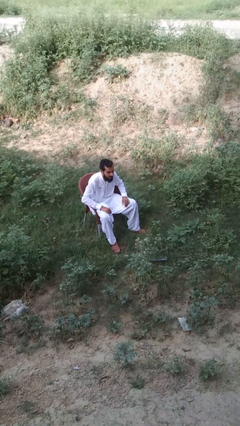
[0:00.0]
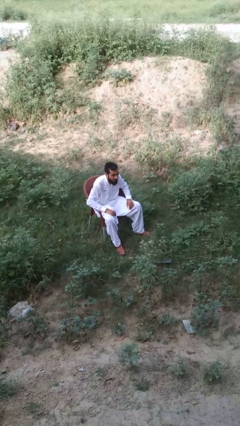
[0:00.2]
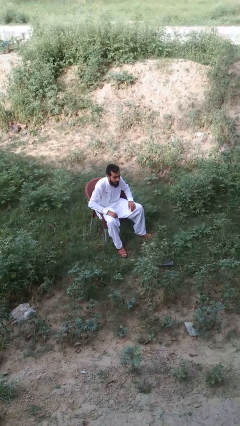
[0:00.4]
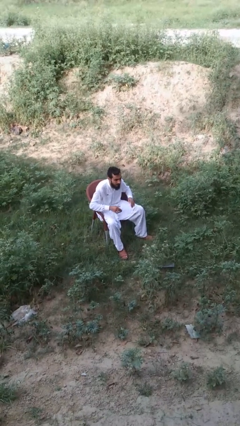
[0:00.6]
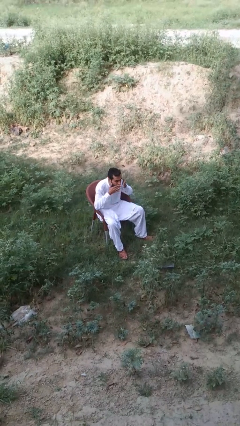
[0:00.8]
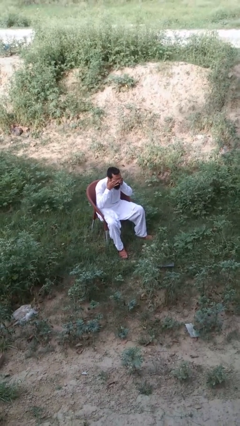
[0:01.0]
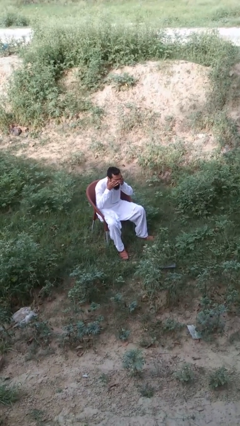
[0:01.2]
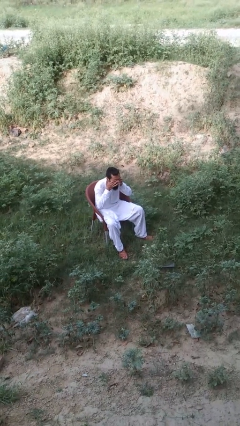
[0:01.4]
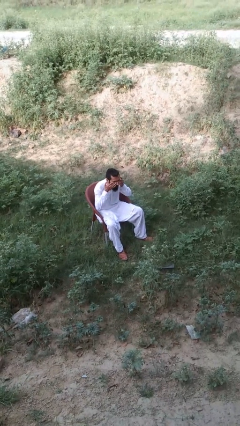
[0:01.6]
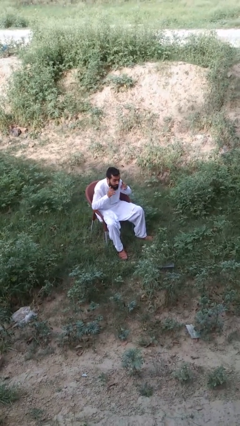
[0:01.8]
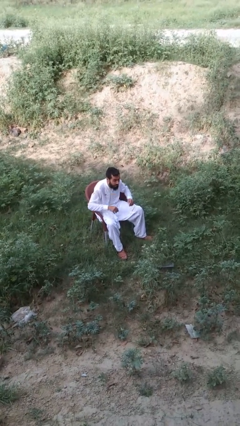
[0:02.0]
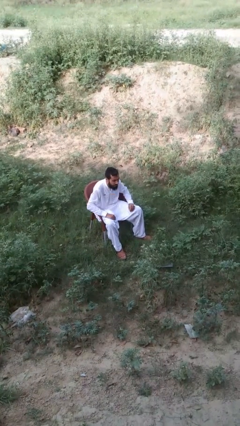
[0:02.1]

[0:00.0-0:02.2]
person rubs eyes

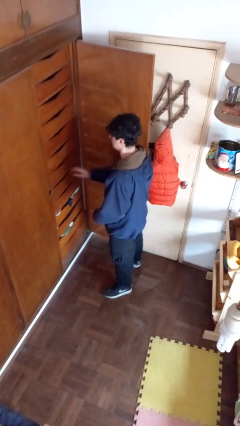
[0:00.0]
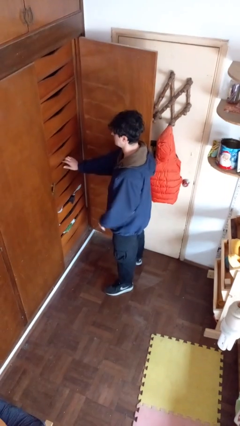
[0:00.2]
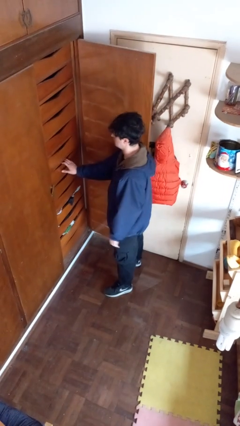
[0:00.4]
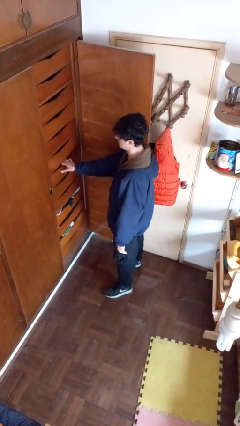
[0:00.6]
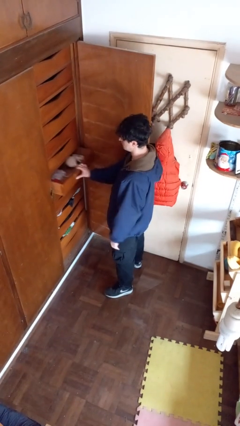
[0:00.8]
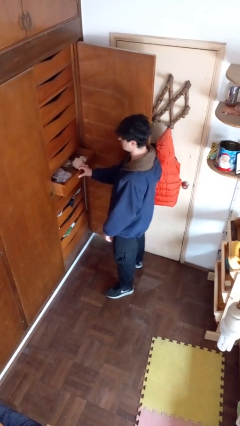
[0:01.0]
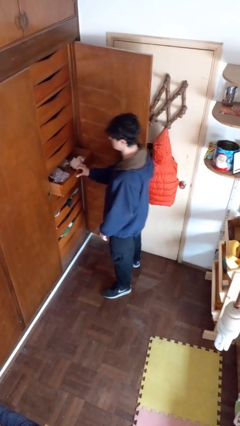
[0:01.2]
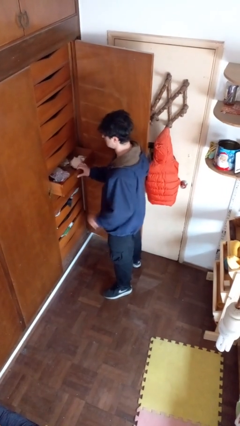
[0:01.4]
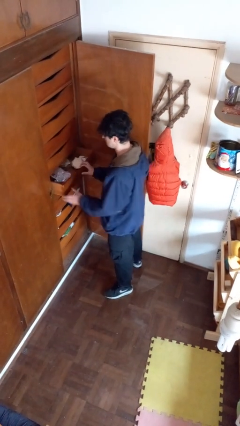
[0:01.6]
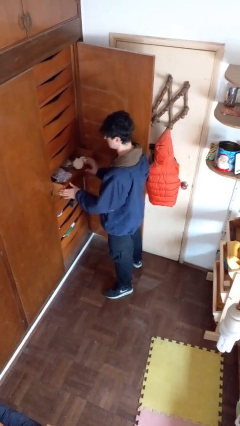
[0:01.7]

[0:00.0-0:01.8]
person opens dresser drawer

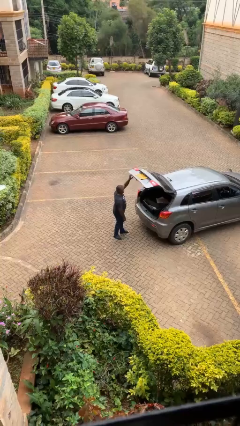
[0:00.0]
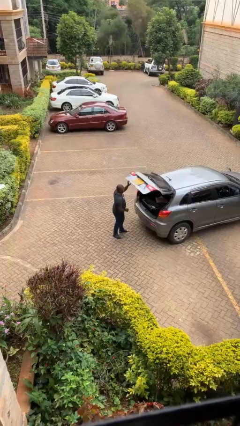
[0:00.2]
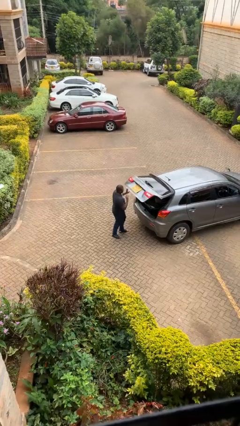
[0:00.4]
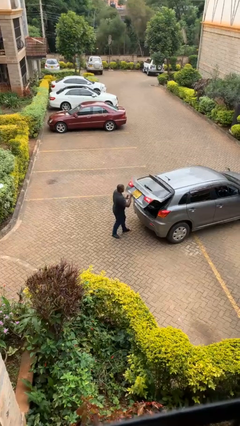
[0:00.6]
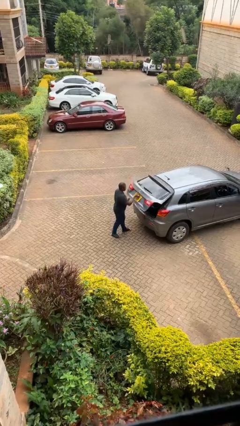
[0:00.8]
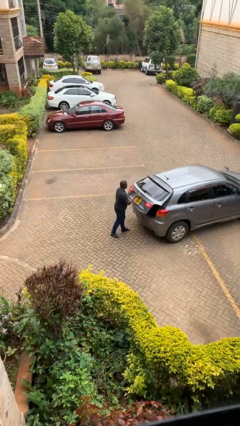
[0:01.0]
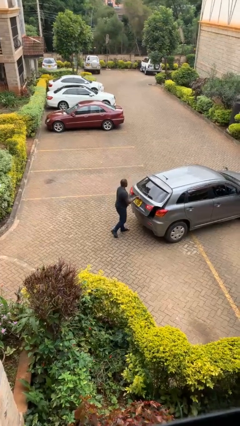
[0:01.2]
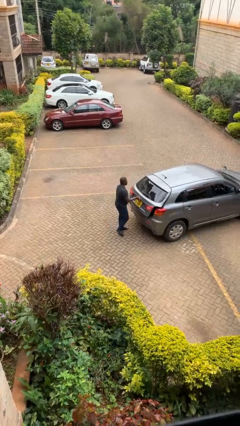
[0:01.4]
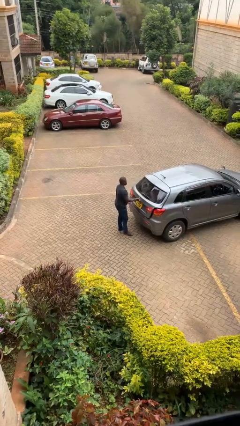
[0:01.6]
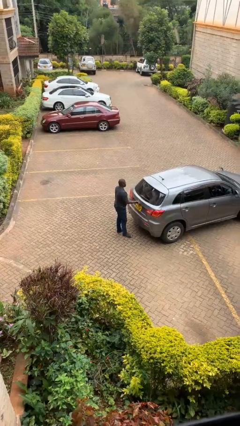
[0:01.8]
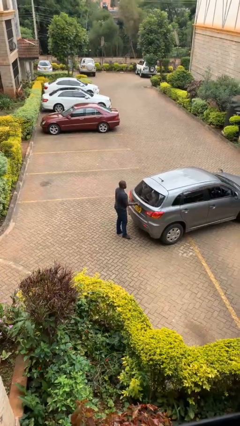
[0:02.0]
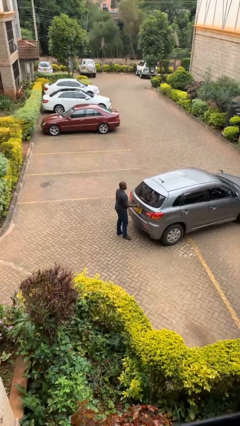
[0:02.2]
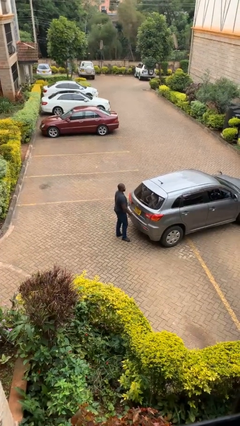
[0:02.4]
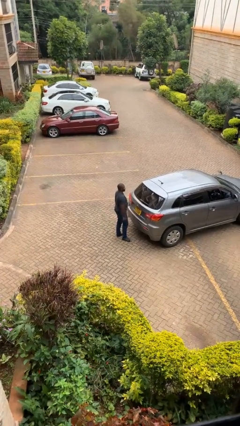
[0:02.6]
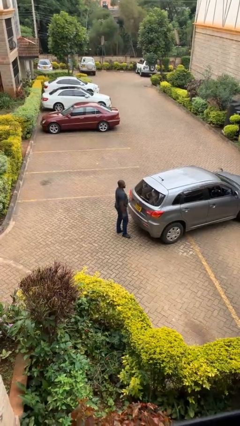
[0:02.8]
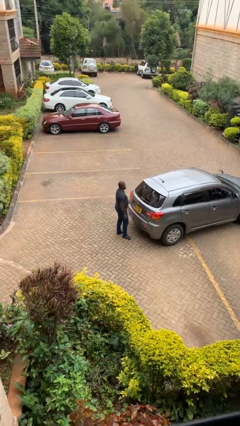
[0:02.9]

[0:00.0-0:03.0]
person closes car trunk

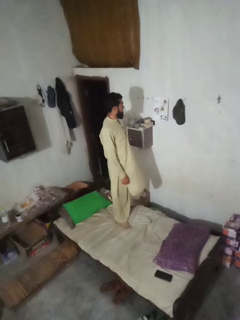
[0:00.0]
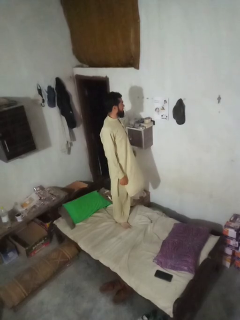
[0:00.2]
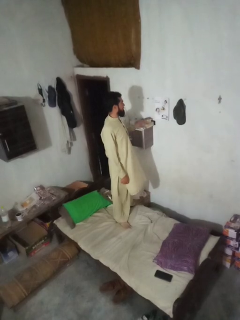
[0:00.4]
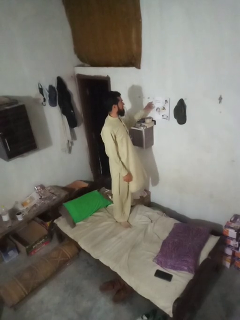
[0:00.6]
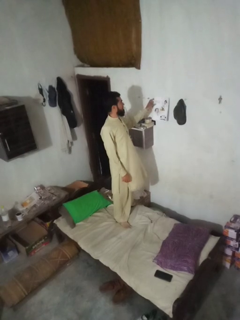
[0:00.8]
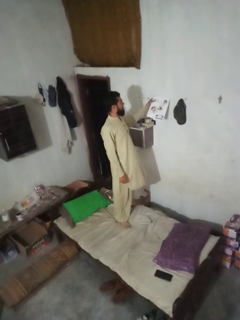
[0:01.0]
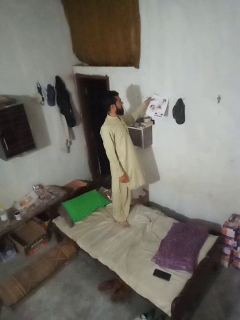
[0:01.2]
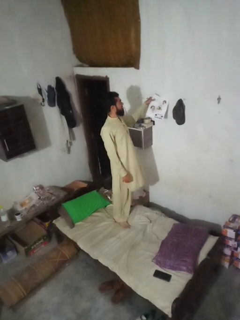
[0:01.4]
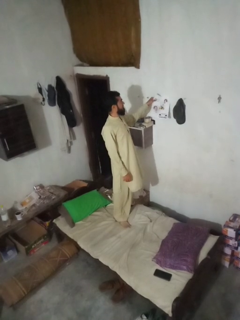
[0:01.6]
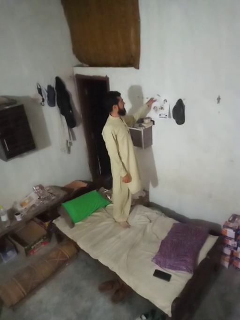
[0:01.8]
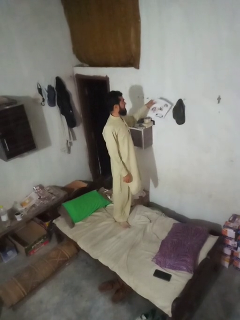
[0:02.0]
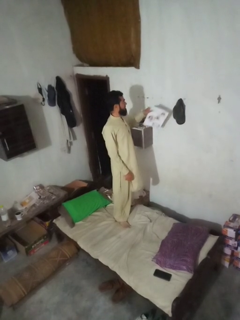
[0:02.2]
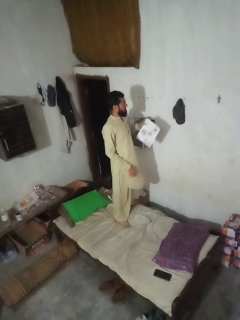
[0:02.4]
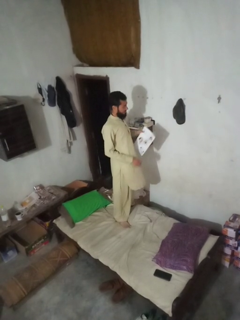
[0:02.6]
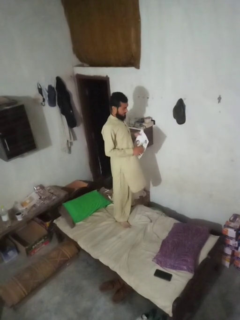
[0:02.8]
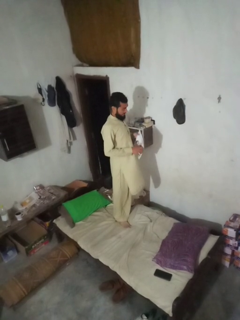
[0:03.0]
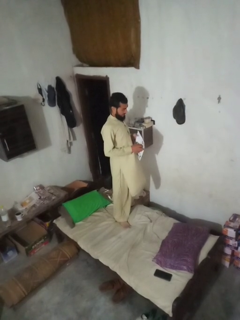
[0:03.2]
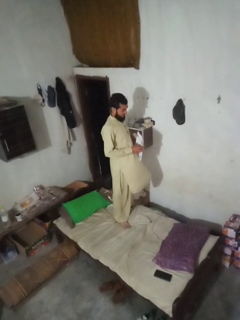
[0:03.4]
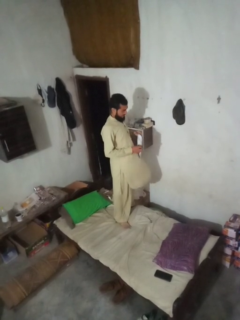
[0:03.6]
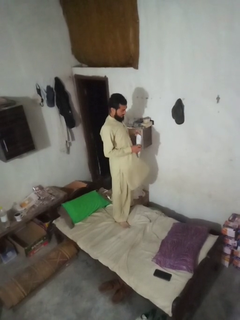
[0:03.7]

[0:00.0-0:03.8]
person takes down picture frame

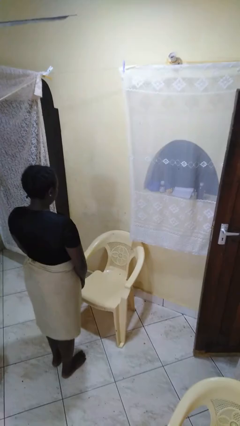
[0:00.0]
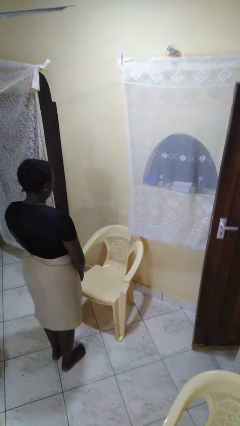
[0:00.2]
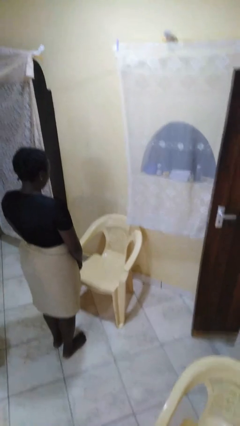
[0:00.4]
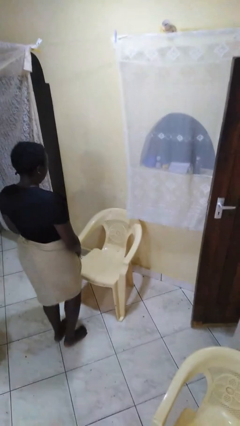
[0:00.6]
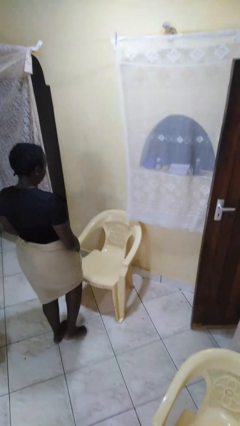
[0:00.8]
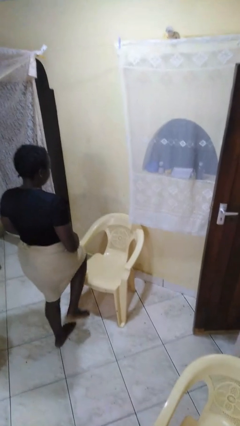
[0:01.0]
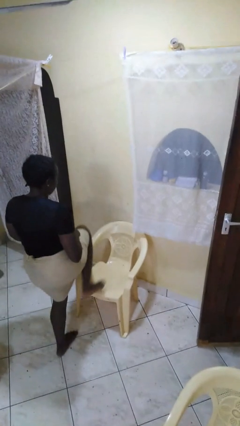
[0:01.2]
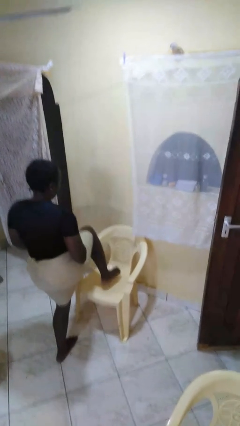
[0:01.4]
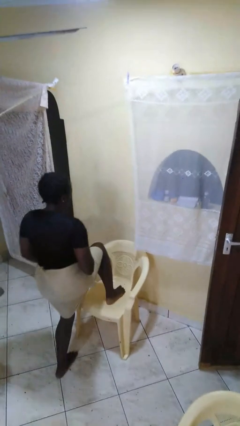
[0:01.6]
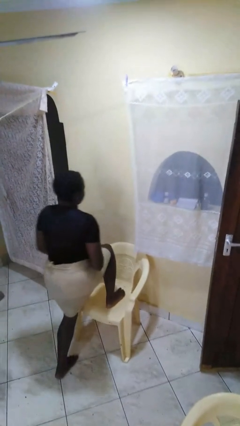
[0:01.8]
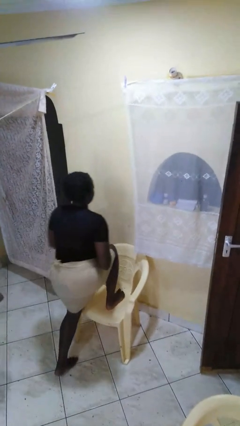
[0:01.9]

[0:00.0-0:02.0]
person climbs on chair

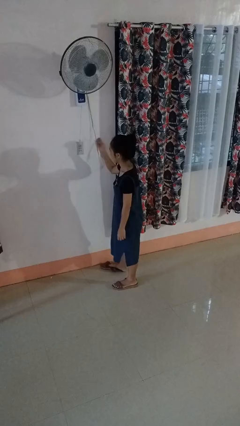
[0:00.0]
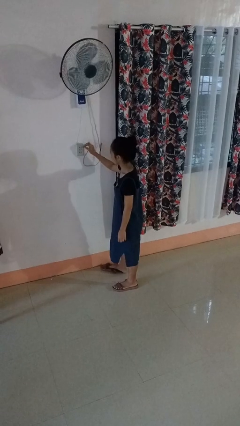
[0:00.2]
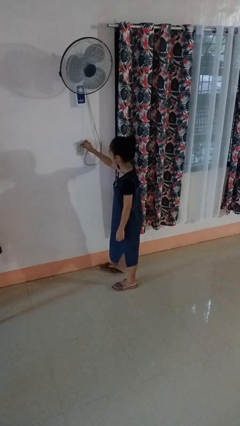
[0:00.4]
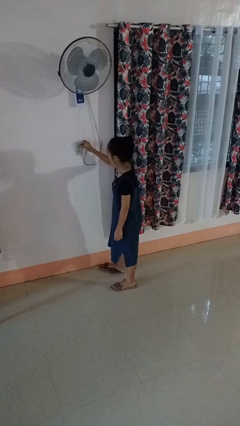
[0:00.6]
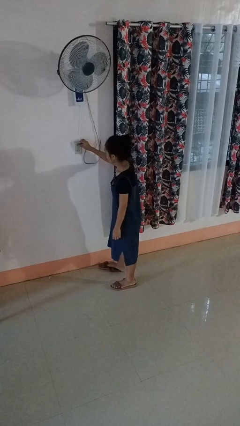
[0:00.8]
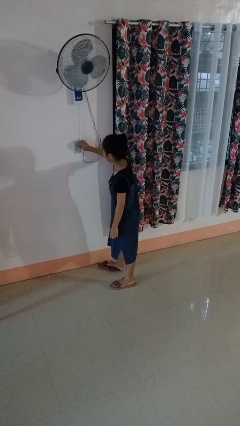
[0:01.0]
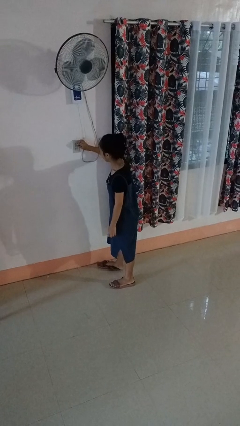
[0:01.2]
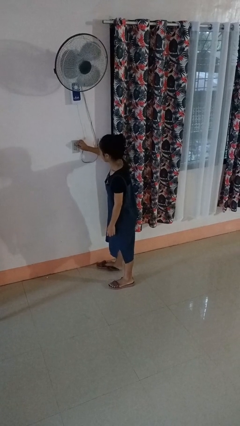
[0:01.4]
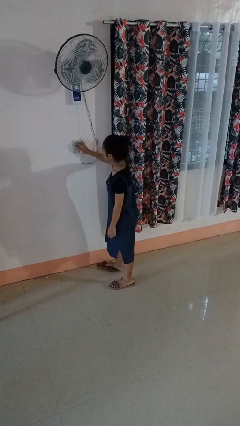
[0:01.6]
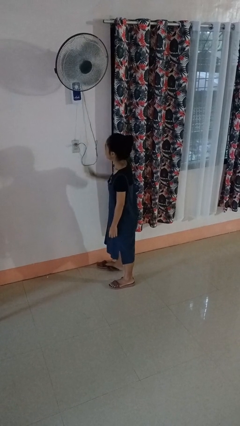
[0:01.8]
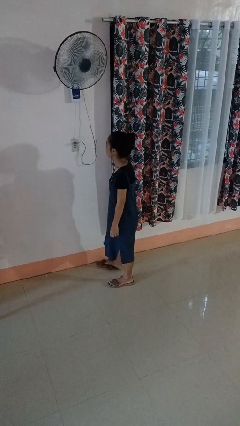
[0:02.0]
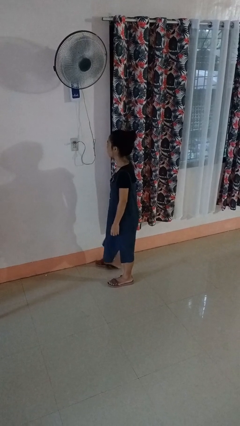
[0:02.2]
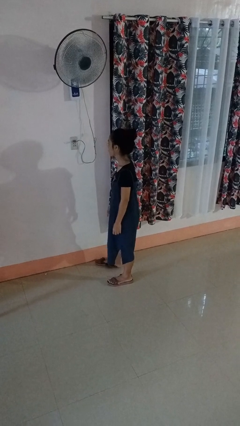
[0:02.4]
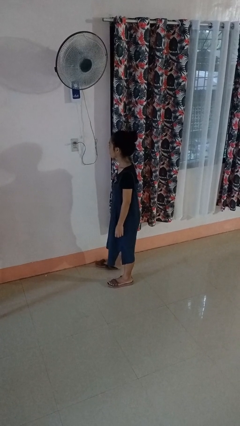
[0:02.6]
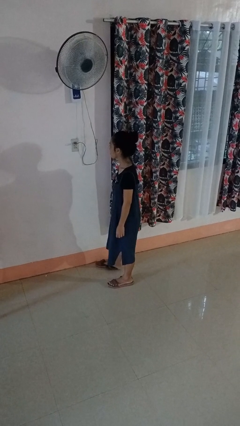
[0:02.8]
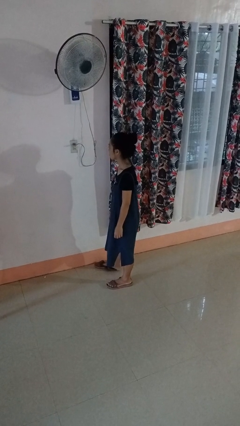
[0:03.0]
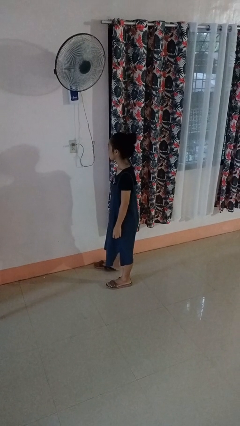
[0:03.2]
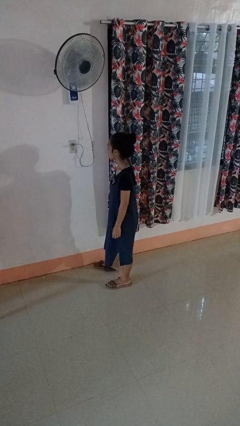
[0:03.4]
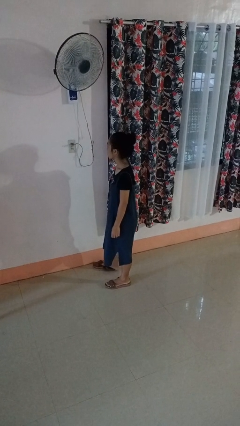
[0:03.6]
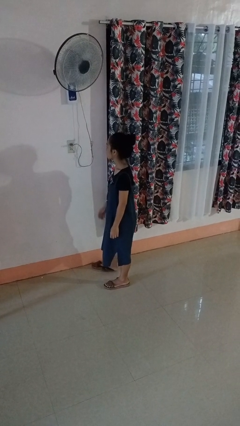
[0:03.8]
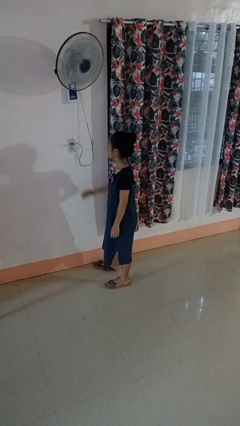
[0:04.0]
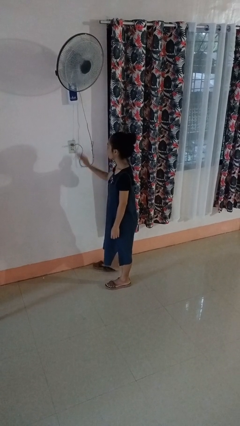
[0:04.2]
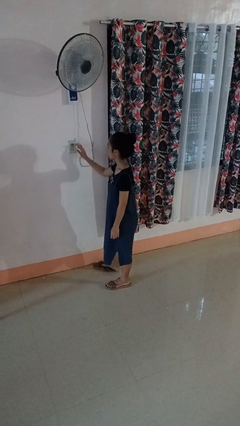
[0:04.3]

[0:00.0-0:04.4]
person plugs into electrical socket

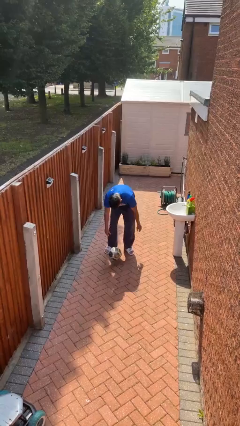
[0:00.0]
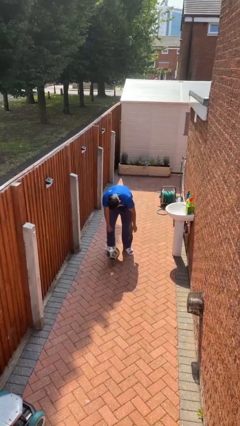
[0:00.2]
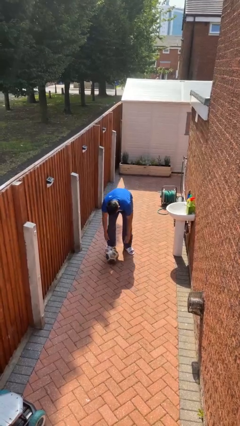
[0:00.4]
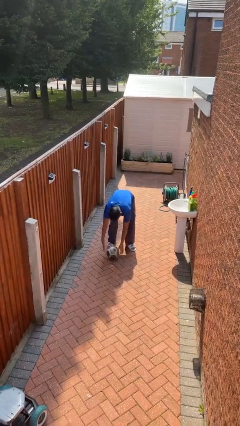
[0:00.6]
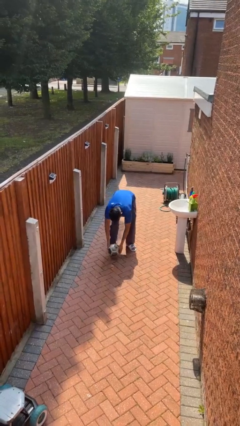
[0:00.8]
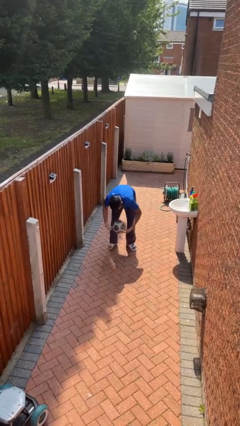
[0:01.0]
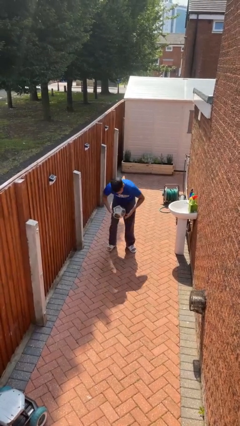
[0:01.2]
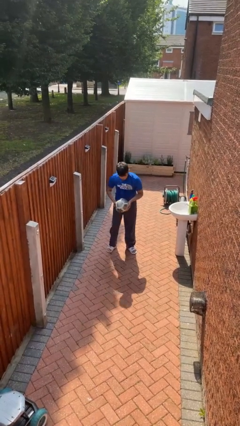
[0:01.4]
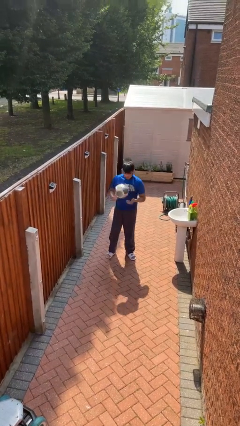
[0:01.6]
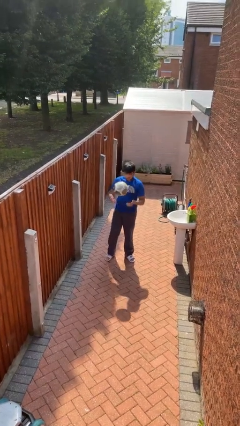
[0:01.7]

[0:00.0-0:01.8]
person picks up object from floor
